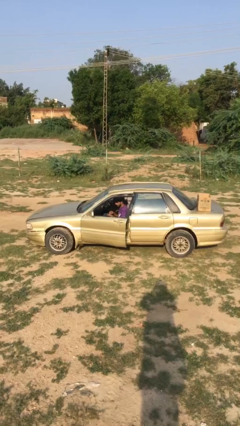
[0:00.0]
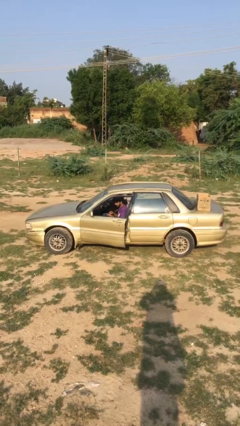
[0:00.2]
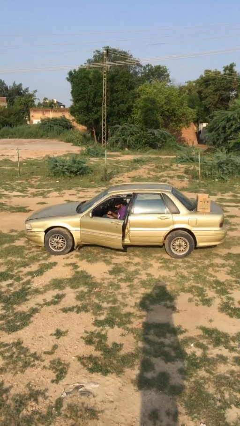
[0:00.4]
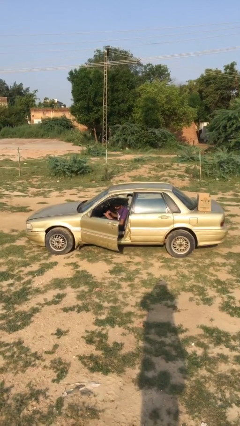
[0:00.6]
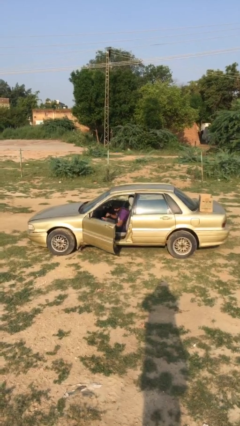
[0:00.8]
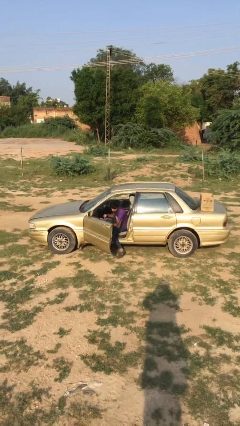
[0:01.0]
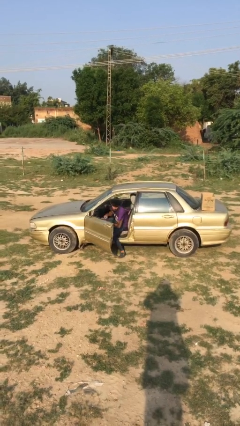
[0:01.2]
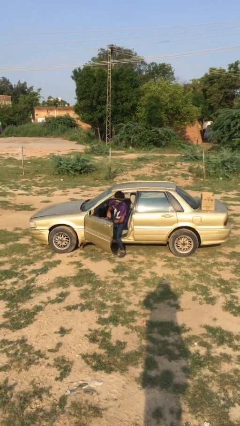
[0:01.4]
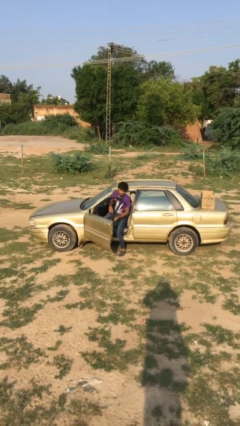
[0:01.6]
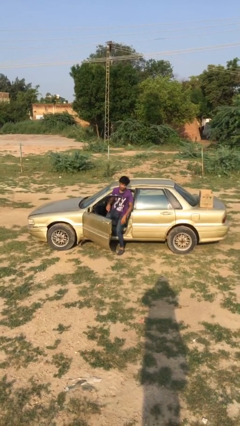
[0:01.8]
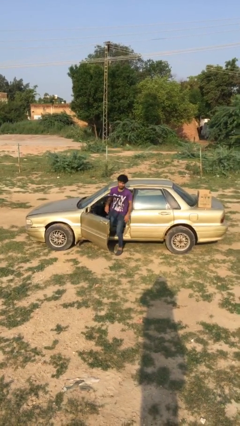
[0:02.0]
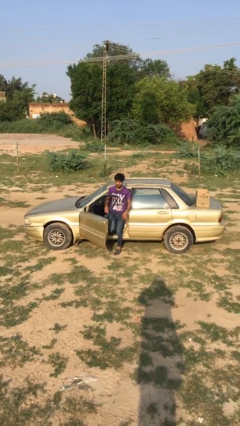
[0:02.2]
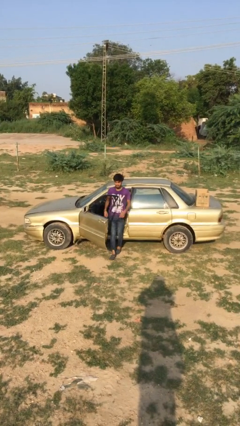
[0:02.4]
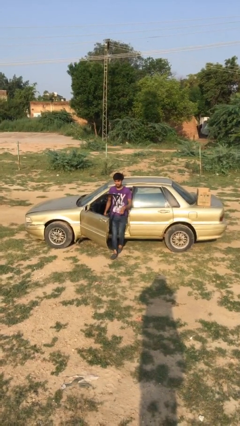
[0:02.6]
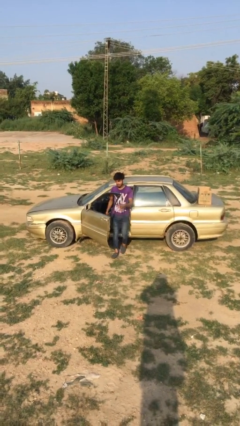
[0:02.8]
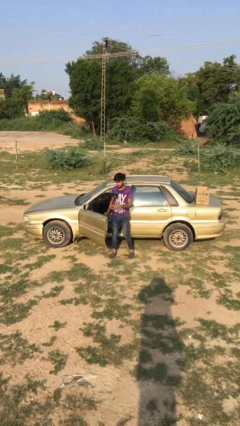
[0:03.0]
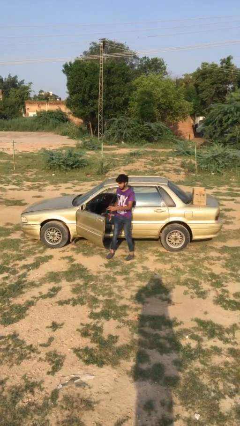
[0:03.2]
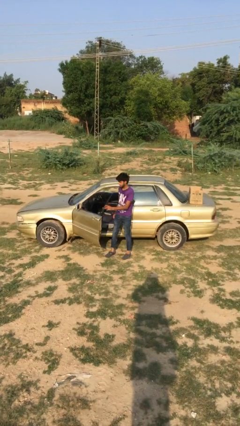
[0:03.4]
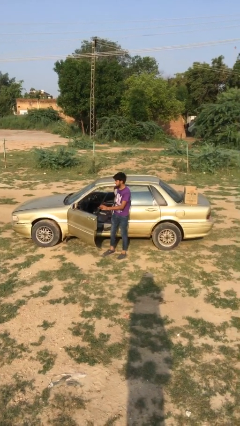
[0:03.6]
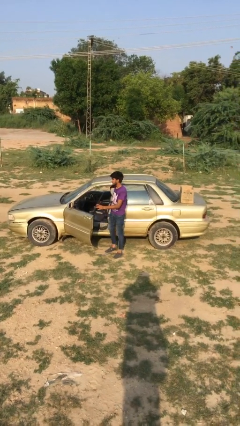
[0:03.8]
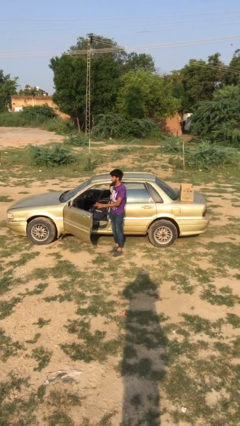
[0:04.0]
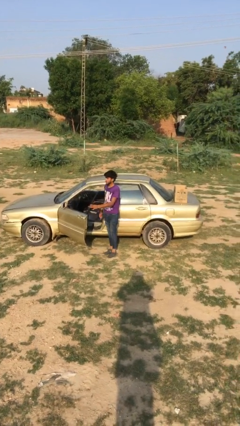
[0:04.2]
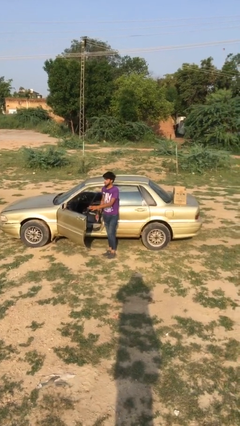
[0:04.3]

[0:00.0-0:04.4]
person exits car

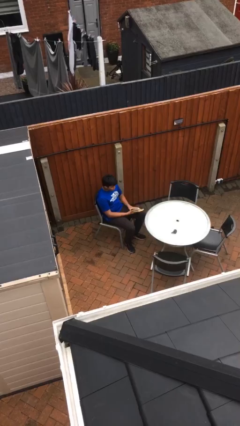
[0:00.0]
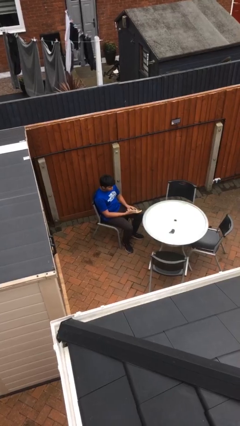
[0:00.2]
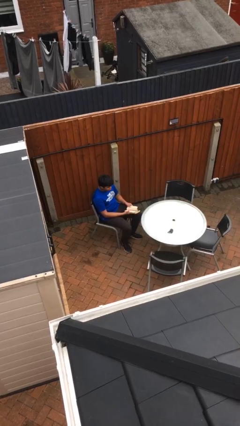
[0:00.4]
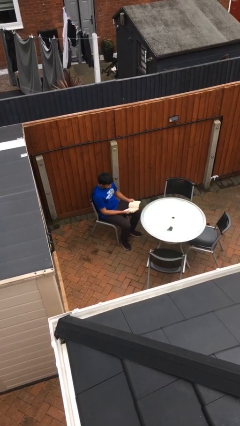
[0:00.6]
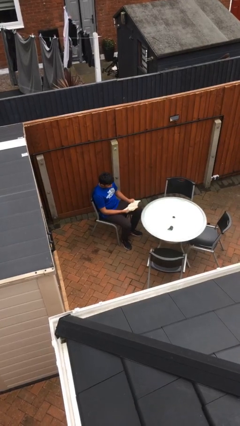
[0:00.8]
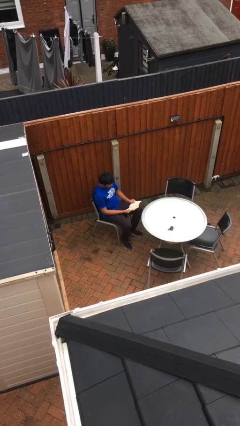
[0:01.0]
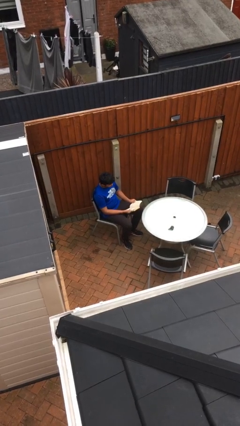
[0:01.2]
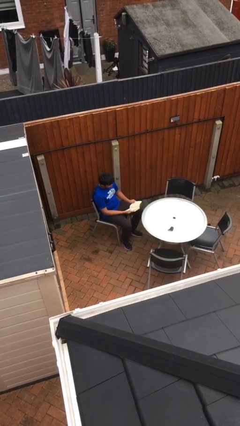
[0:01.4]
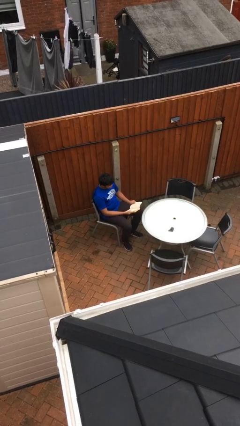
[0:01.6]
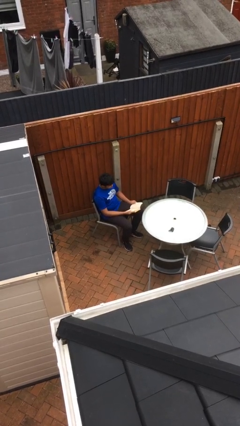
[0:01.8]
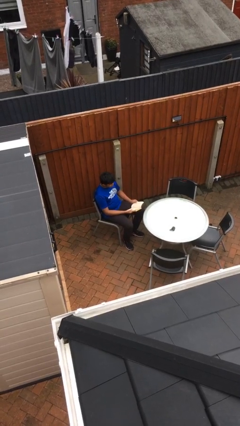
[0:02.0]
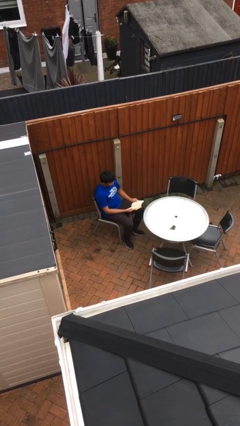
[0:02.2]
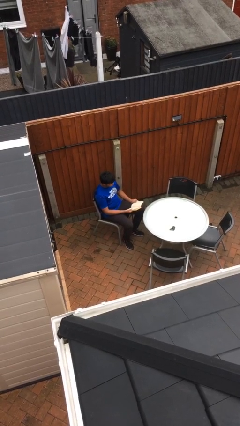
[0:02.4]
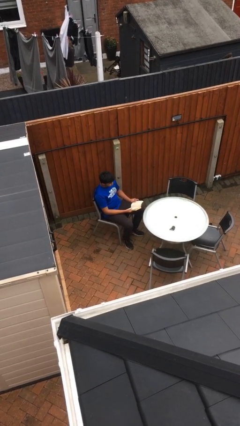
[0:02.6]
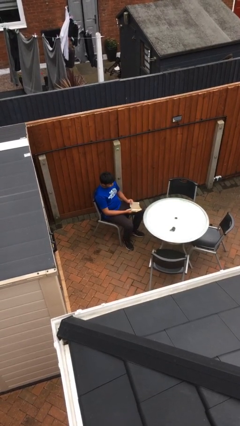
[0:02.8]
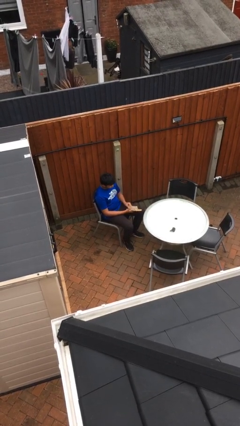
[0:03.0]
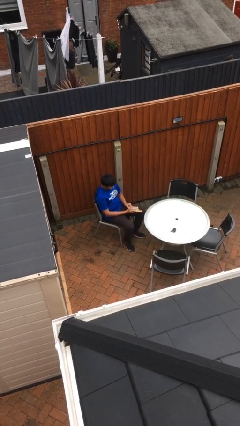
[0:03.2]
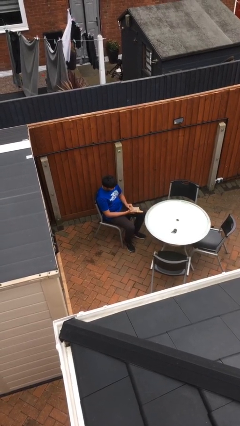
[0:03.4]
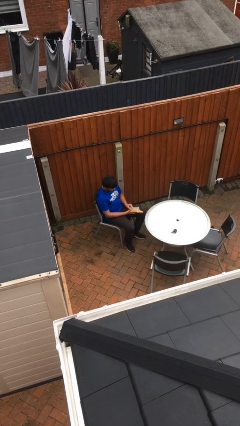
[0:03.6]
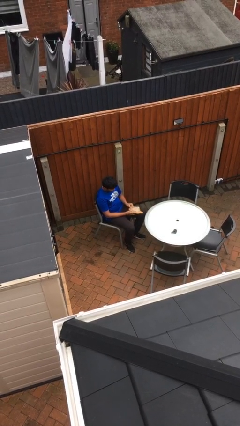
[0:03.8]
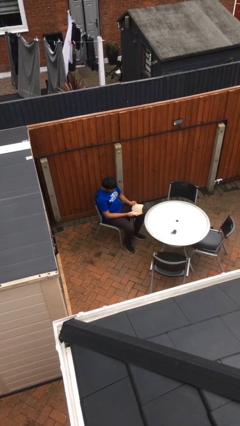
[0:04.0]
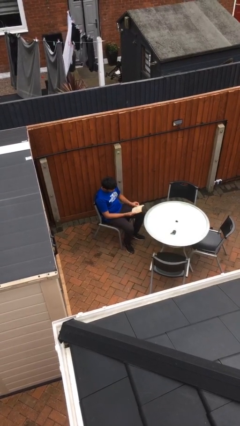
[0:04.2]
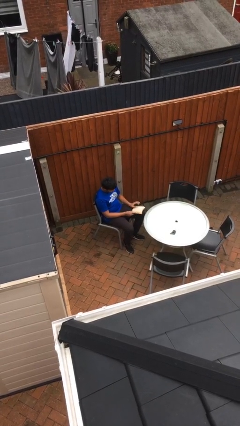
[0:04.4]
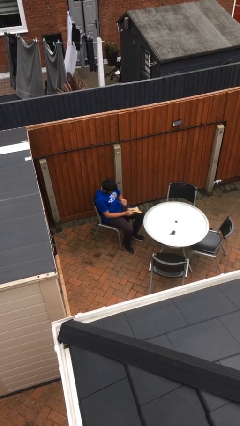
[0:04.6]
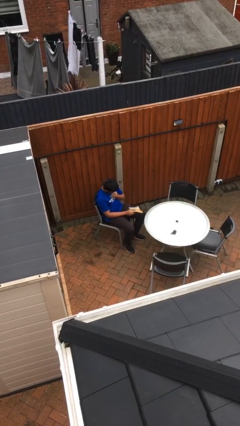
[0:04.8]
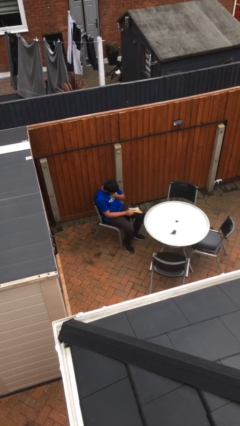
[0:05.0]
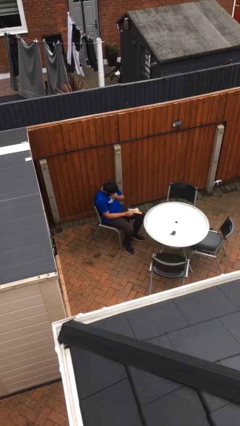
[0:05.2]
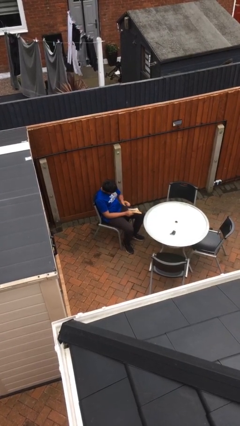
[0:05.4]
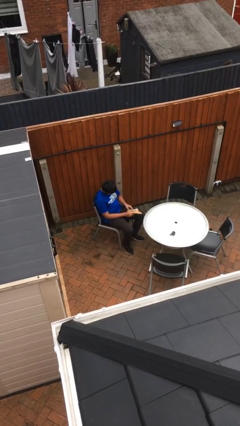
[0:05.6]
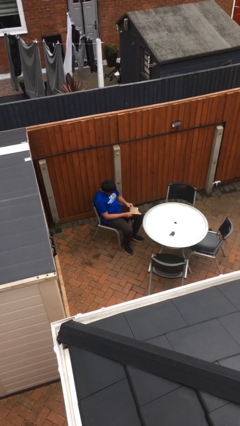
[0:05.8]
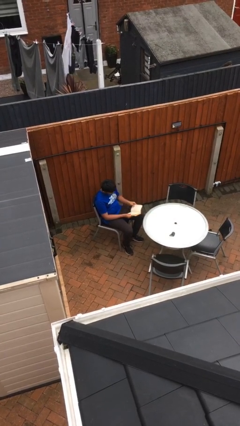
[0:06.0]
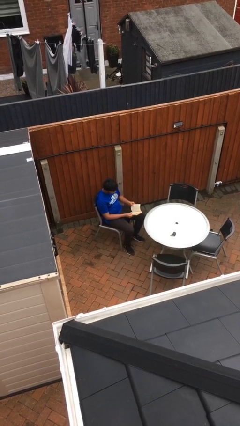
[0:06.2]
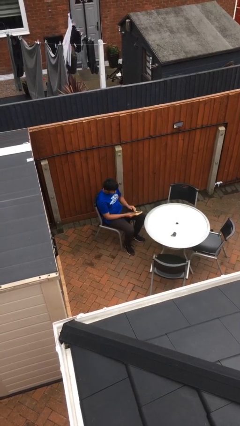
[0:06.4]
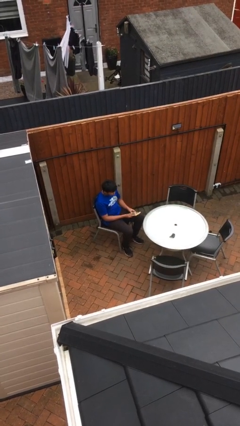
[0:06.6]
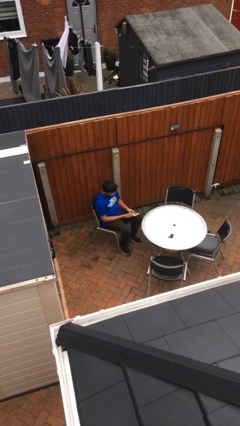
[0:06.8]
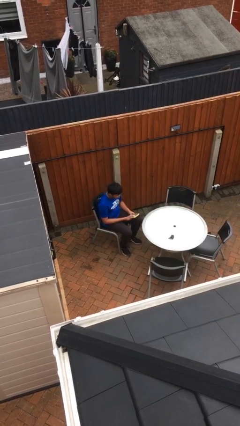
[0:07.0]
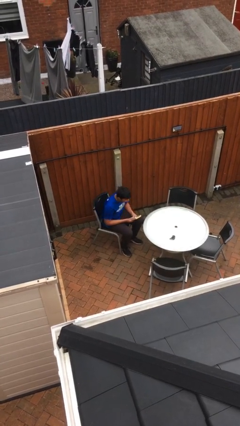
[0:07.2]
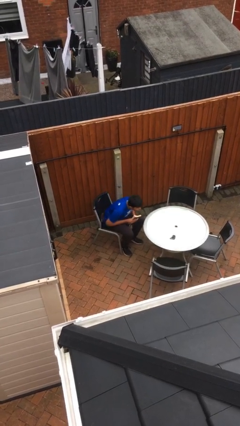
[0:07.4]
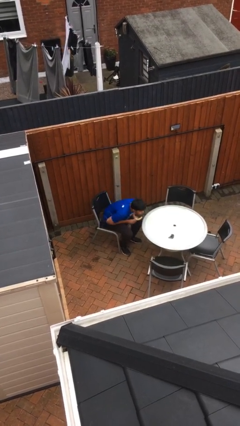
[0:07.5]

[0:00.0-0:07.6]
person reads document

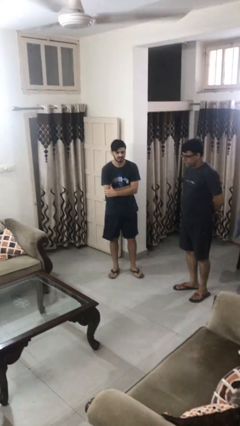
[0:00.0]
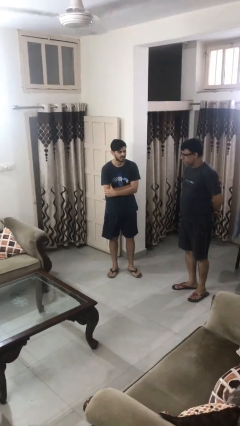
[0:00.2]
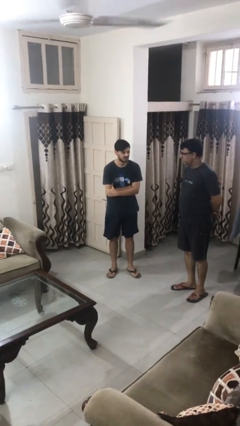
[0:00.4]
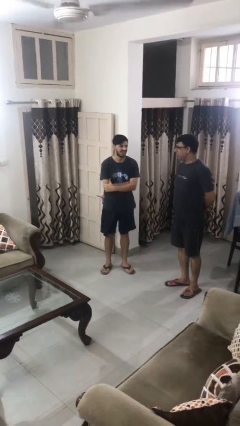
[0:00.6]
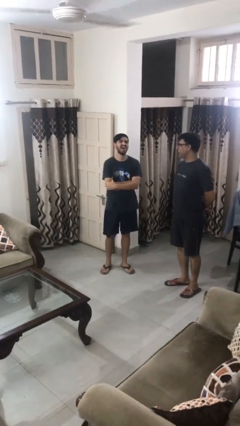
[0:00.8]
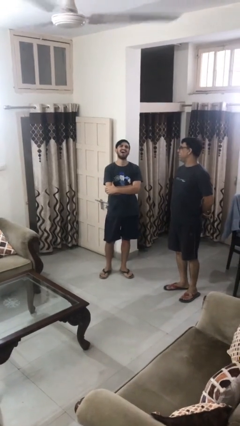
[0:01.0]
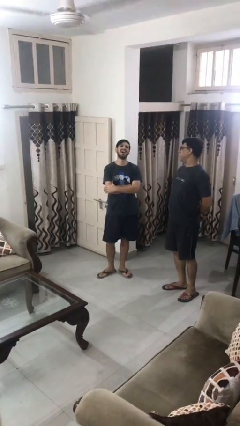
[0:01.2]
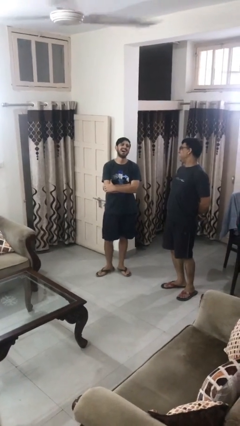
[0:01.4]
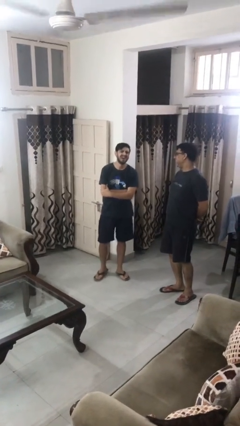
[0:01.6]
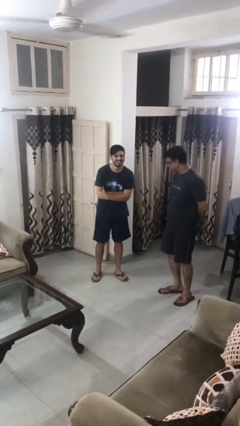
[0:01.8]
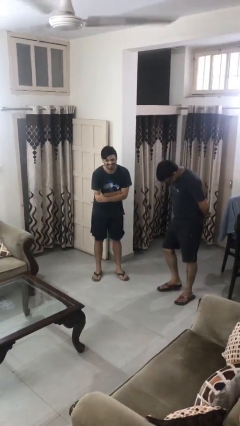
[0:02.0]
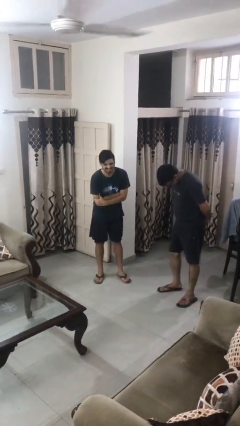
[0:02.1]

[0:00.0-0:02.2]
person laughs with person

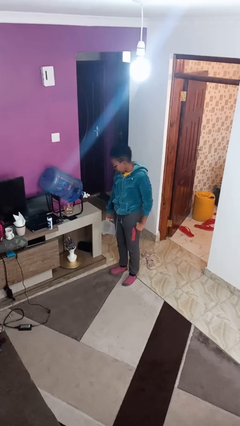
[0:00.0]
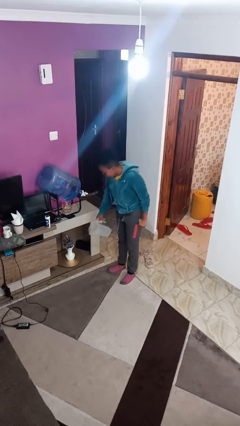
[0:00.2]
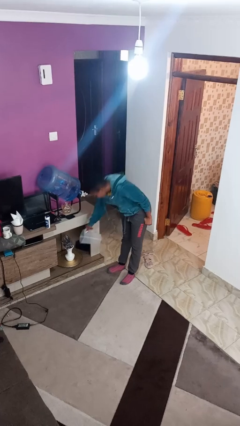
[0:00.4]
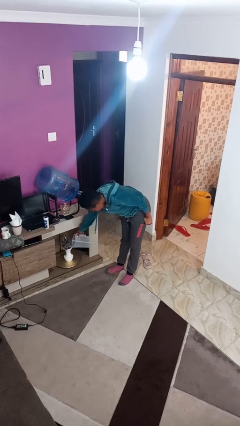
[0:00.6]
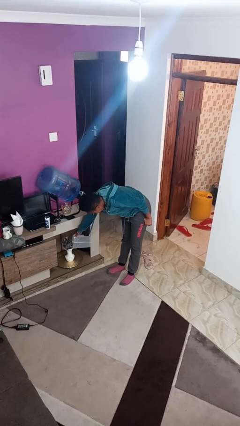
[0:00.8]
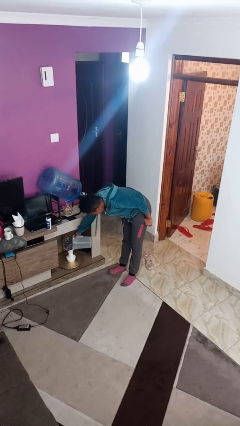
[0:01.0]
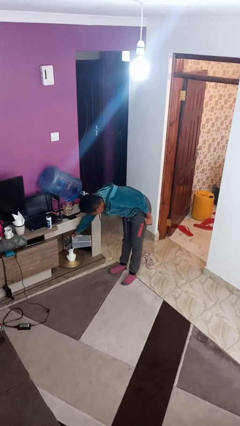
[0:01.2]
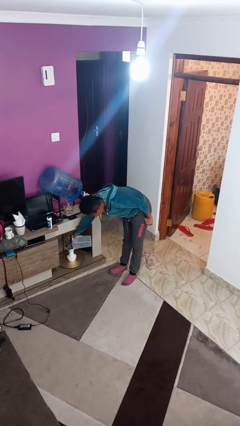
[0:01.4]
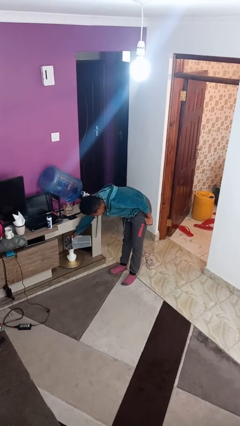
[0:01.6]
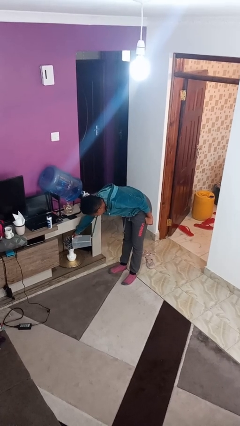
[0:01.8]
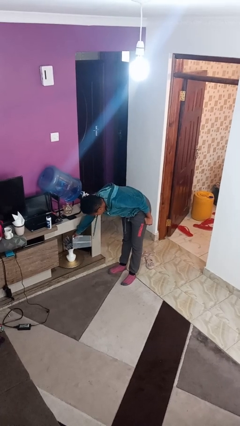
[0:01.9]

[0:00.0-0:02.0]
person waters houseplant

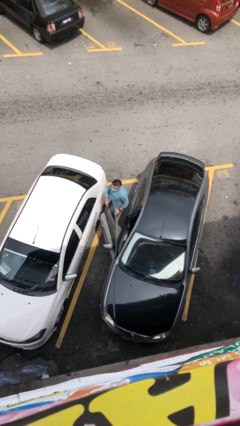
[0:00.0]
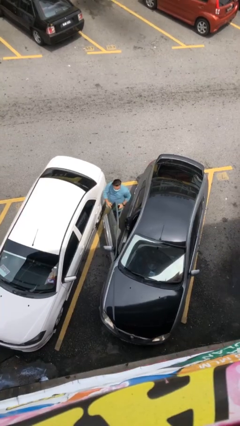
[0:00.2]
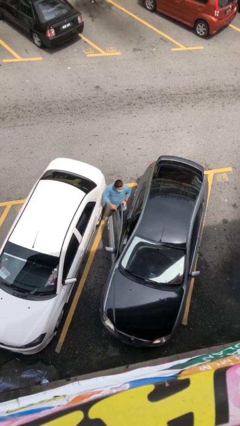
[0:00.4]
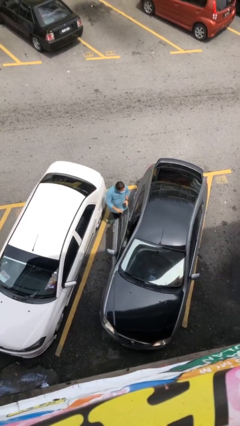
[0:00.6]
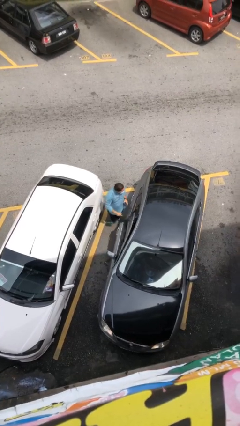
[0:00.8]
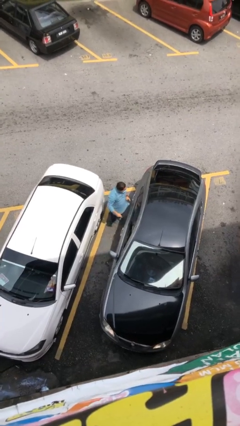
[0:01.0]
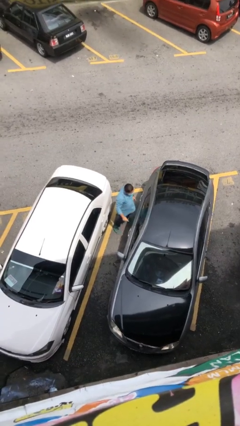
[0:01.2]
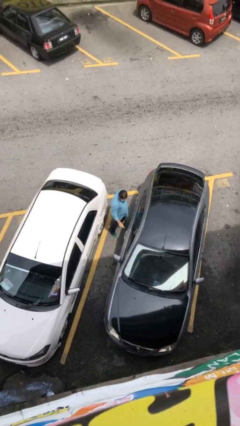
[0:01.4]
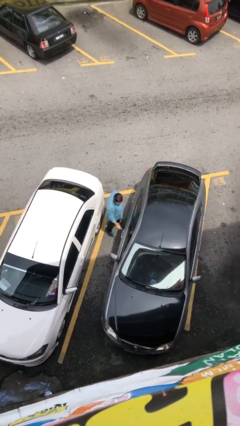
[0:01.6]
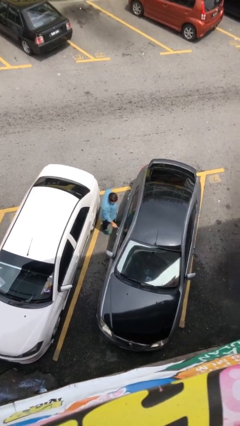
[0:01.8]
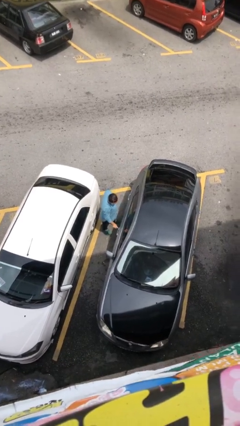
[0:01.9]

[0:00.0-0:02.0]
person closes car door
